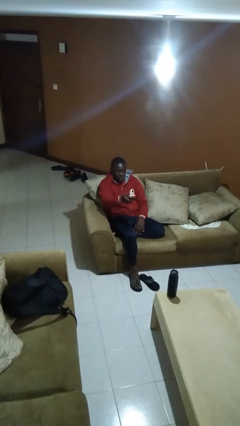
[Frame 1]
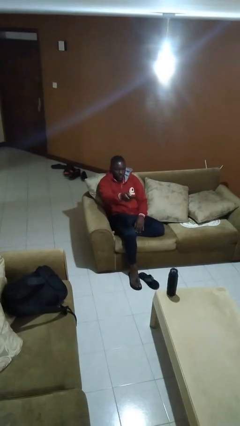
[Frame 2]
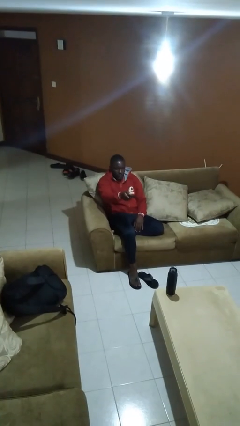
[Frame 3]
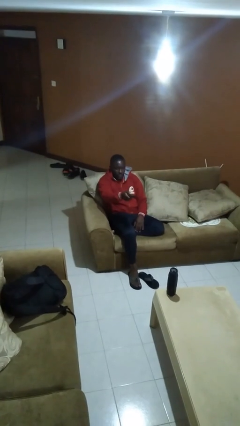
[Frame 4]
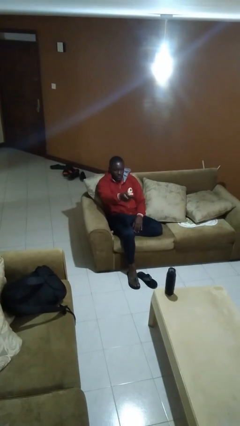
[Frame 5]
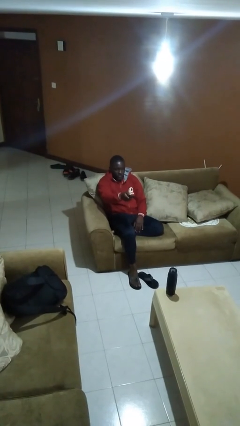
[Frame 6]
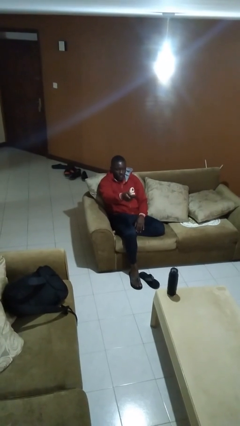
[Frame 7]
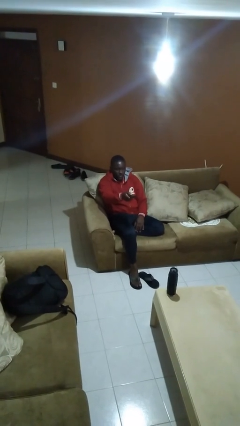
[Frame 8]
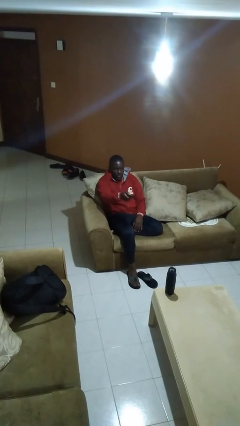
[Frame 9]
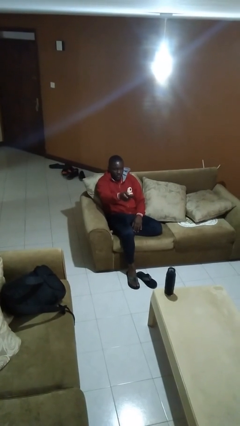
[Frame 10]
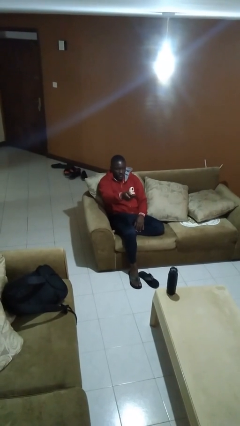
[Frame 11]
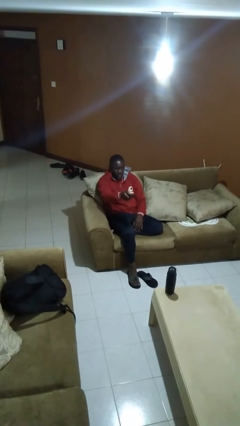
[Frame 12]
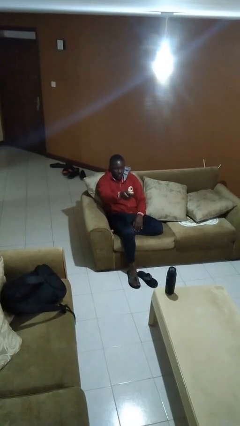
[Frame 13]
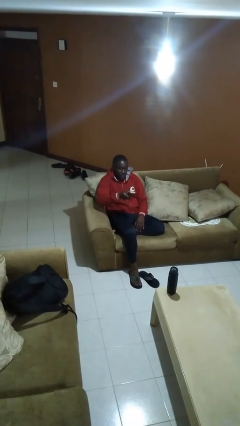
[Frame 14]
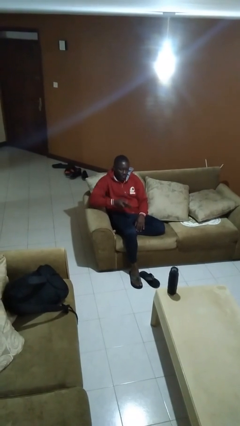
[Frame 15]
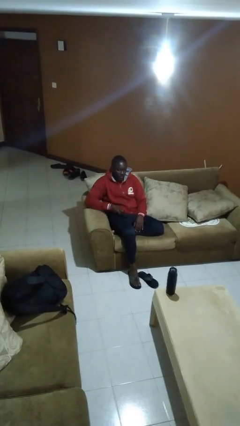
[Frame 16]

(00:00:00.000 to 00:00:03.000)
person uses television remote

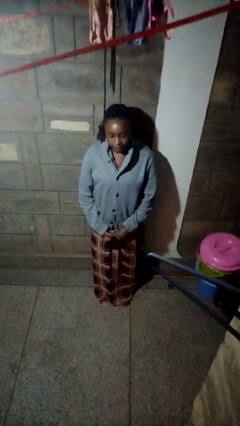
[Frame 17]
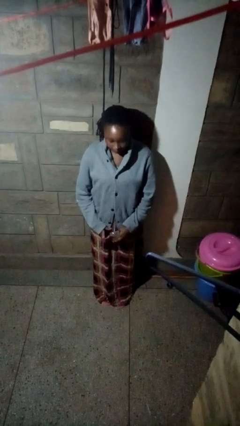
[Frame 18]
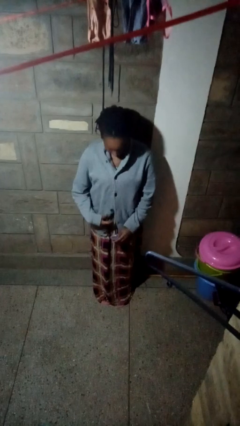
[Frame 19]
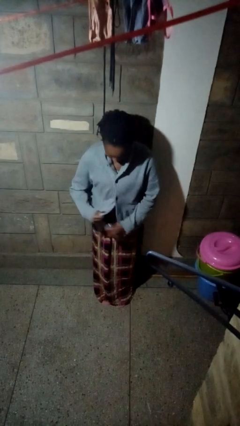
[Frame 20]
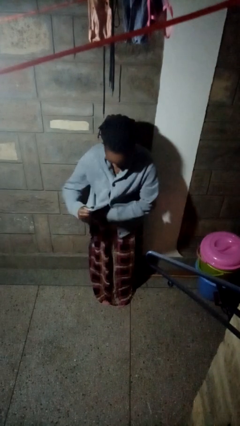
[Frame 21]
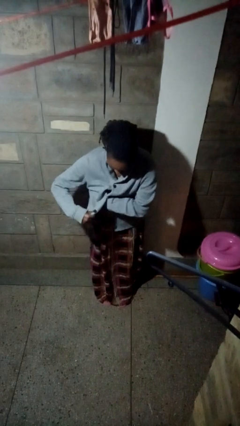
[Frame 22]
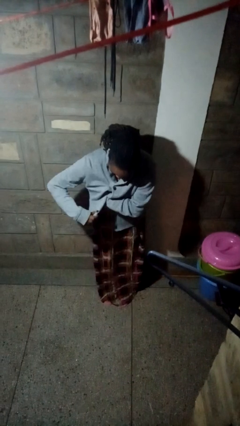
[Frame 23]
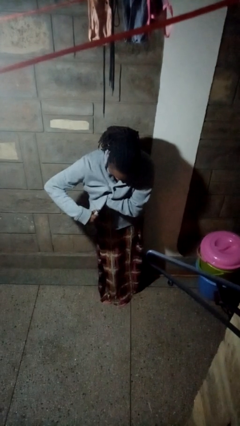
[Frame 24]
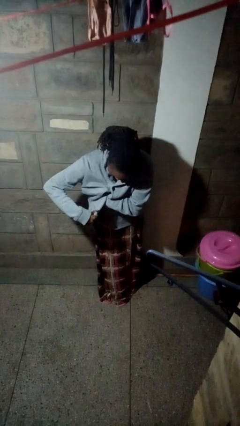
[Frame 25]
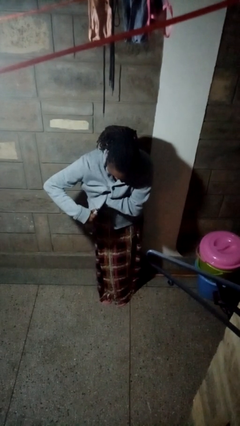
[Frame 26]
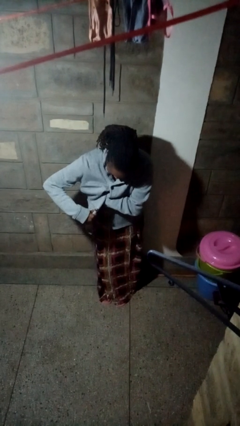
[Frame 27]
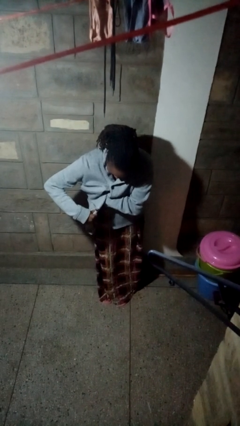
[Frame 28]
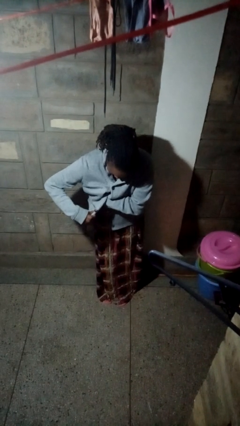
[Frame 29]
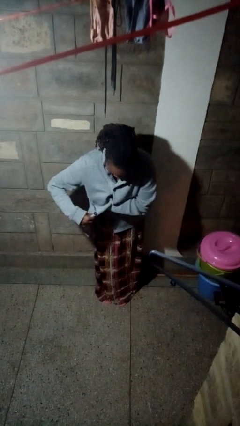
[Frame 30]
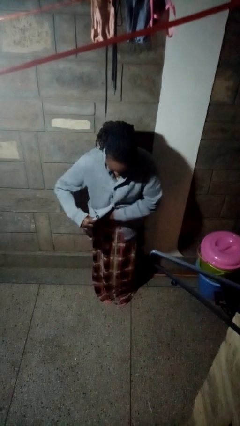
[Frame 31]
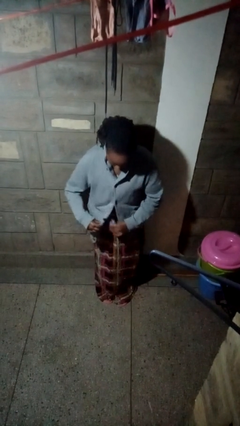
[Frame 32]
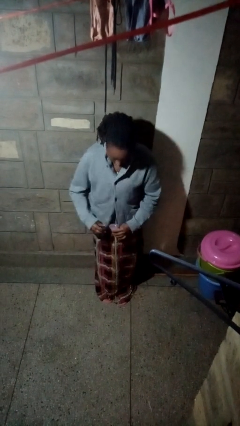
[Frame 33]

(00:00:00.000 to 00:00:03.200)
person applies deodorant

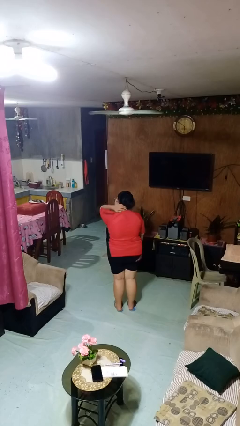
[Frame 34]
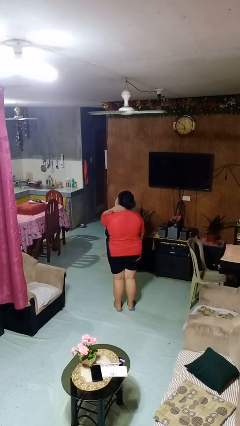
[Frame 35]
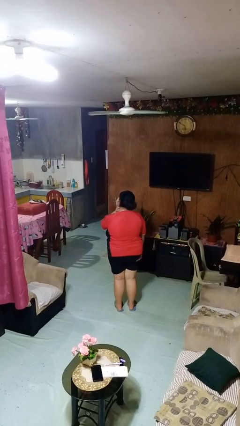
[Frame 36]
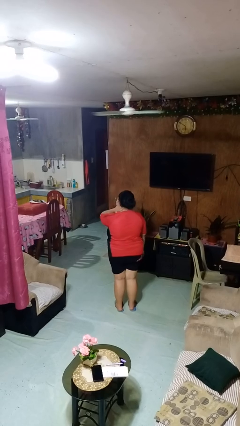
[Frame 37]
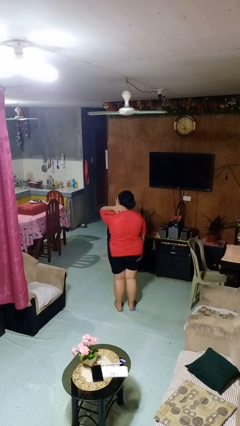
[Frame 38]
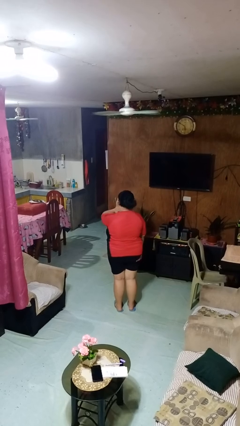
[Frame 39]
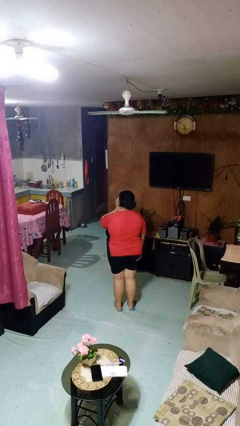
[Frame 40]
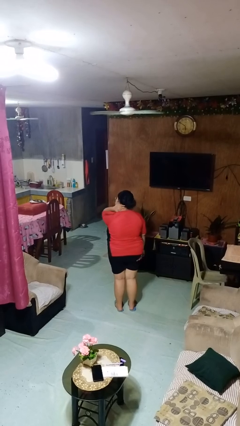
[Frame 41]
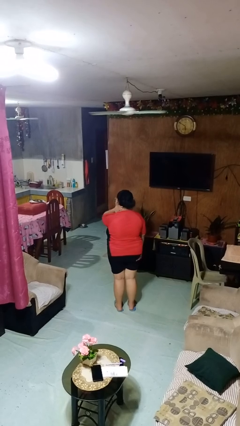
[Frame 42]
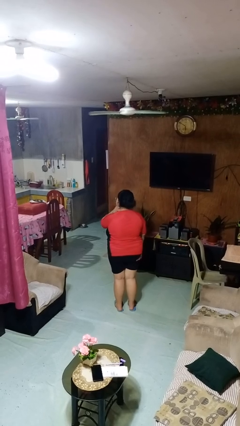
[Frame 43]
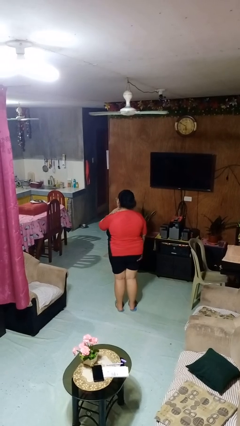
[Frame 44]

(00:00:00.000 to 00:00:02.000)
person rubs neck

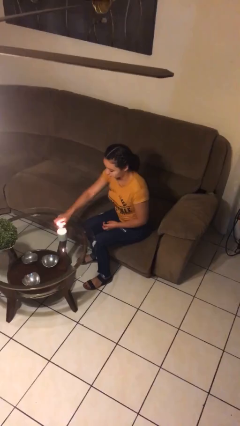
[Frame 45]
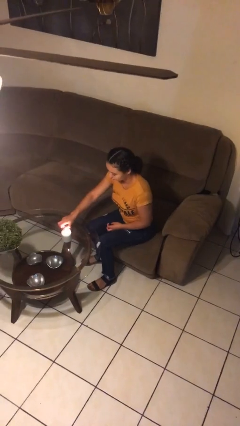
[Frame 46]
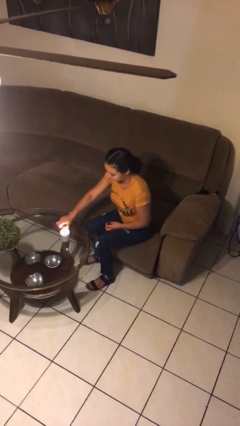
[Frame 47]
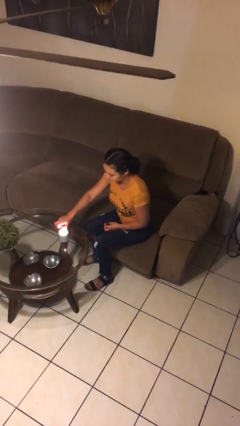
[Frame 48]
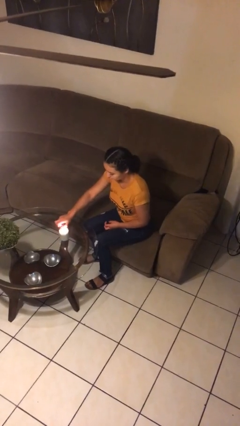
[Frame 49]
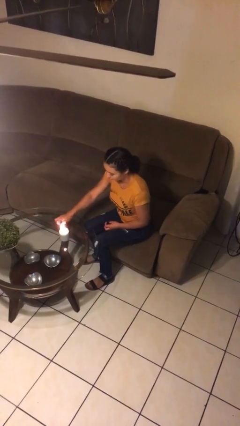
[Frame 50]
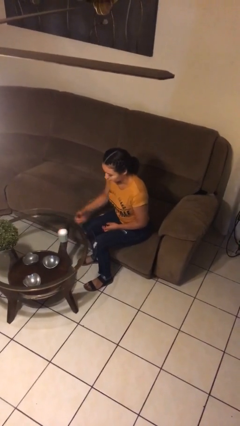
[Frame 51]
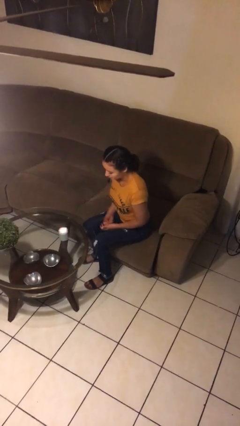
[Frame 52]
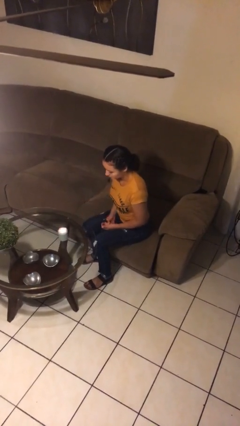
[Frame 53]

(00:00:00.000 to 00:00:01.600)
person lights candle

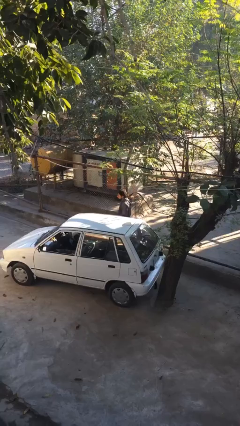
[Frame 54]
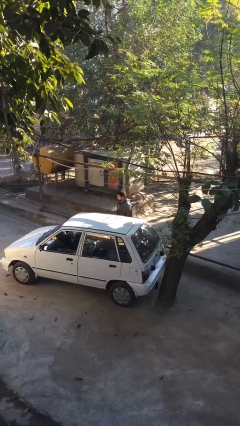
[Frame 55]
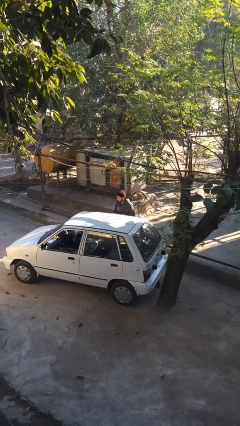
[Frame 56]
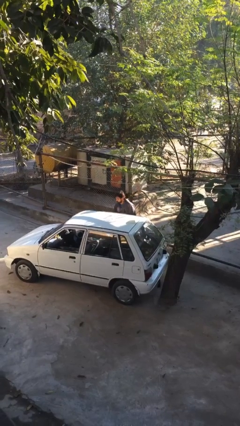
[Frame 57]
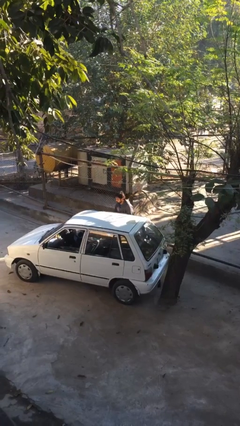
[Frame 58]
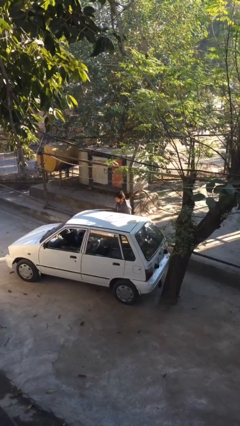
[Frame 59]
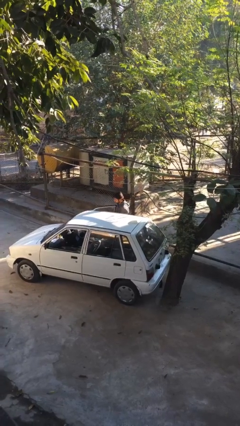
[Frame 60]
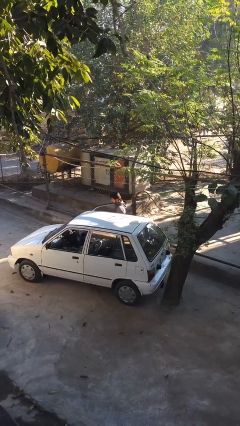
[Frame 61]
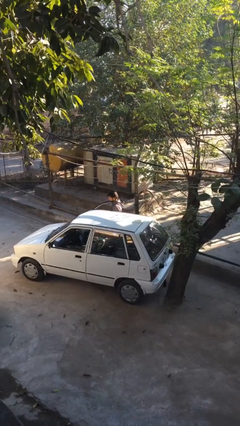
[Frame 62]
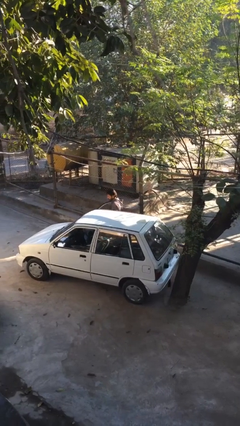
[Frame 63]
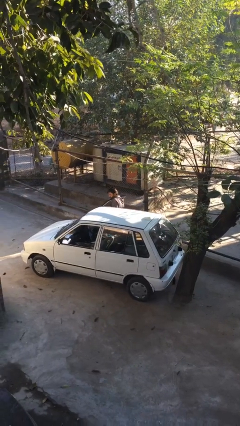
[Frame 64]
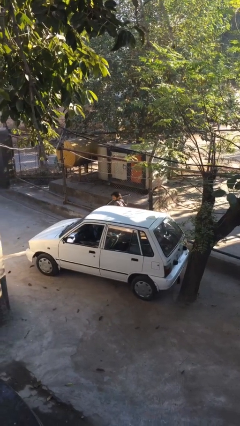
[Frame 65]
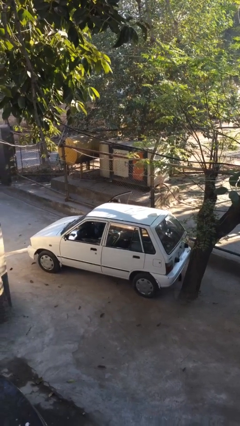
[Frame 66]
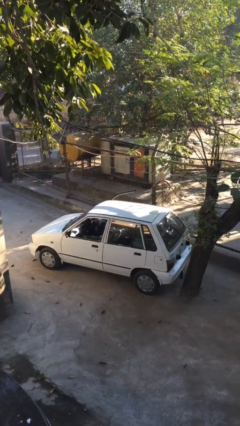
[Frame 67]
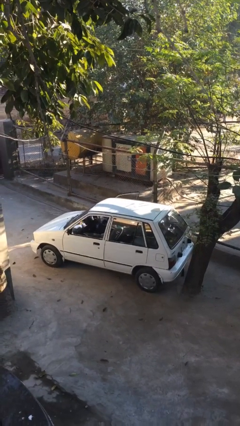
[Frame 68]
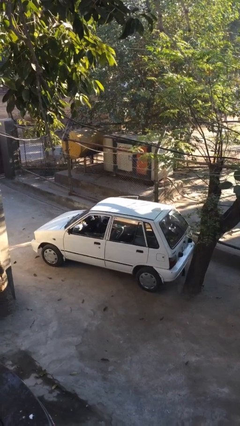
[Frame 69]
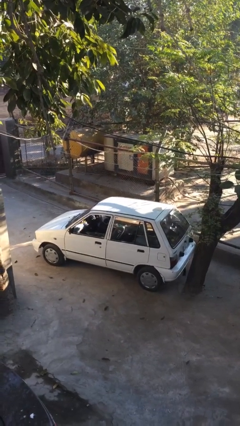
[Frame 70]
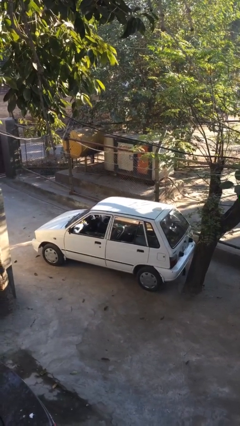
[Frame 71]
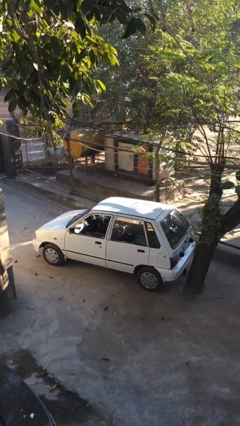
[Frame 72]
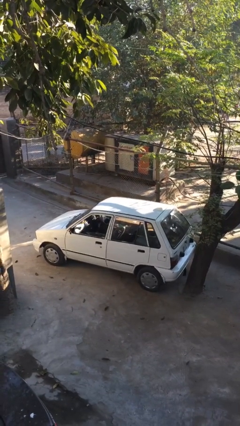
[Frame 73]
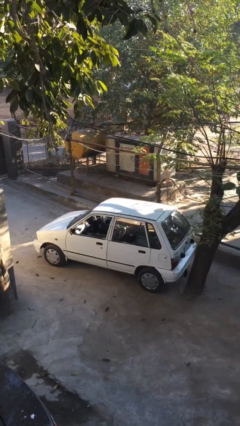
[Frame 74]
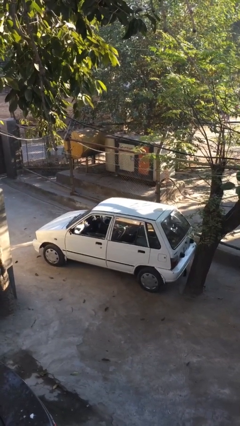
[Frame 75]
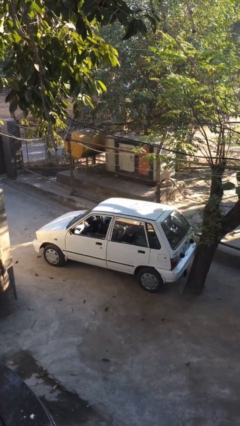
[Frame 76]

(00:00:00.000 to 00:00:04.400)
person enters car

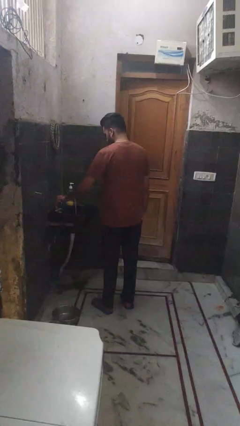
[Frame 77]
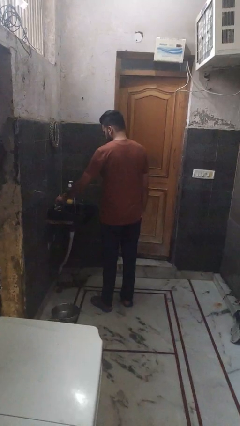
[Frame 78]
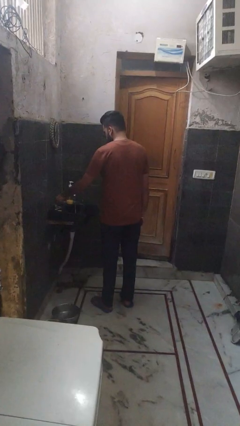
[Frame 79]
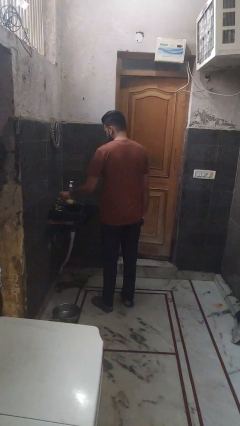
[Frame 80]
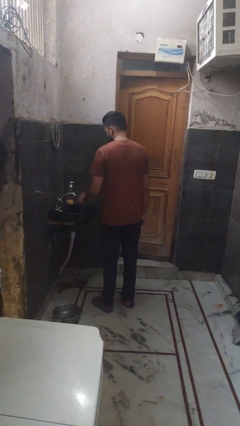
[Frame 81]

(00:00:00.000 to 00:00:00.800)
person turns off faucet

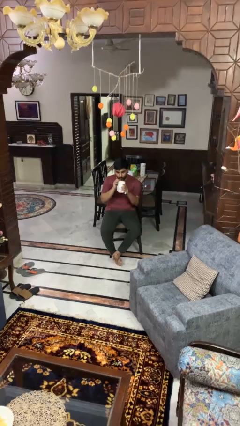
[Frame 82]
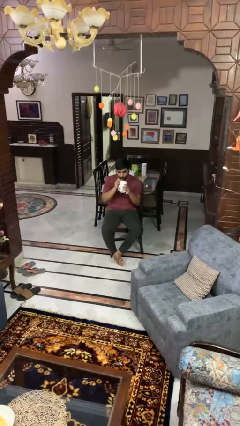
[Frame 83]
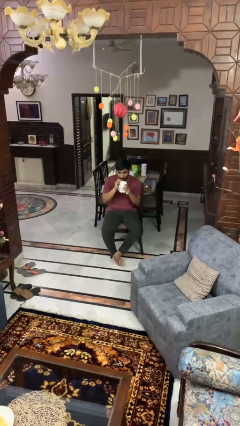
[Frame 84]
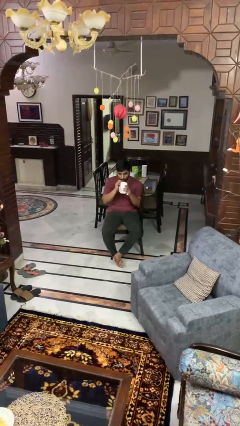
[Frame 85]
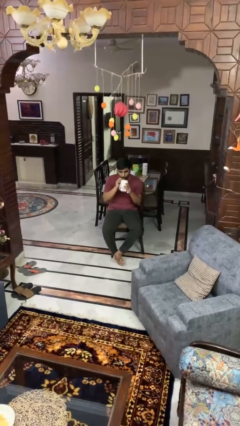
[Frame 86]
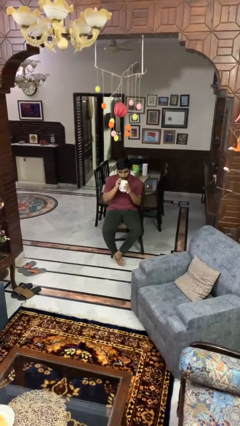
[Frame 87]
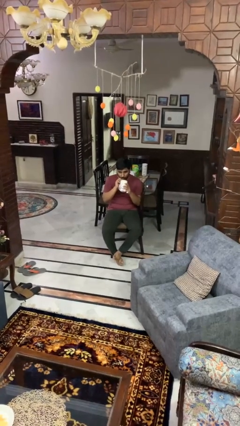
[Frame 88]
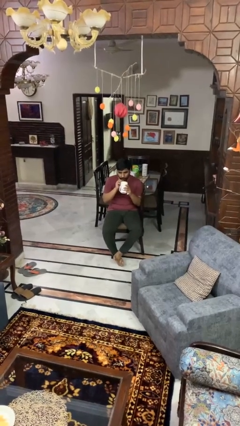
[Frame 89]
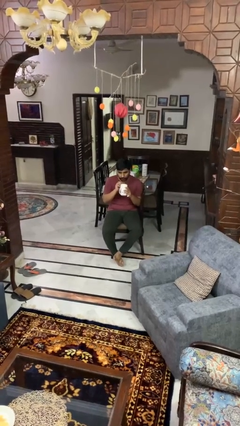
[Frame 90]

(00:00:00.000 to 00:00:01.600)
person drinks from straw

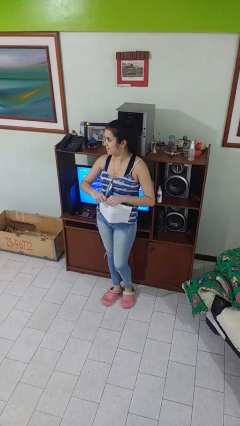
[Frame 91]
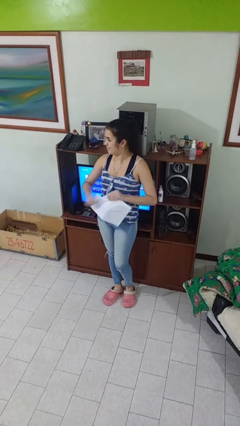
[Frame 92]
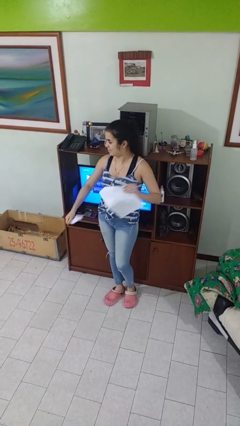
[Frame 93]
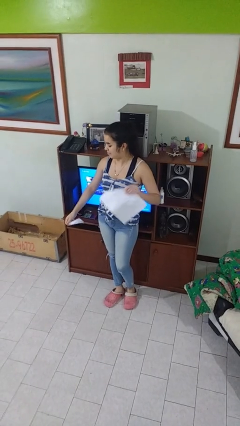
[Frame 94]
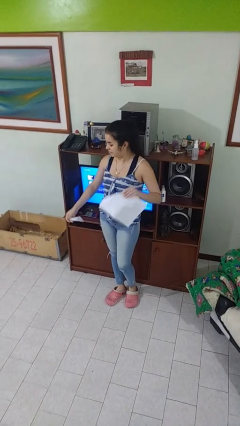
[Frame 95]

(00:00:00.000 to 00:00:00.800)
person tears paper
